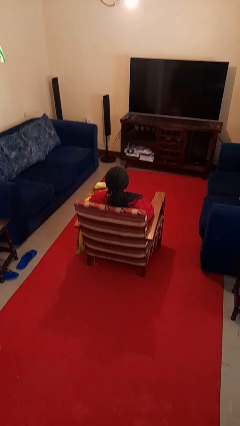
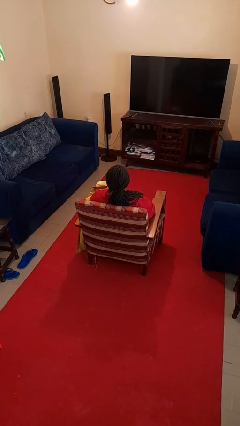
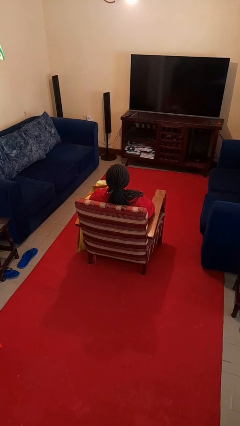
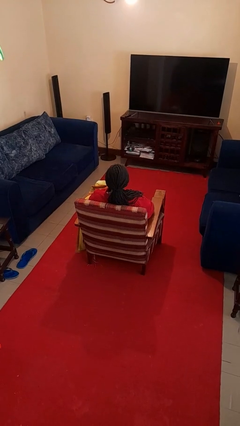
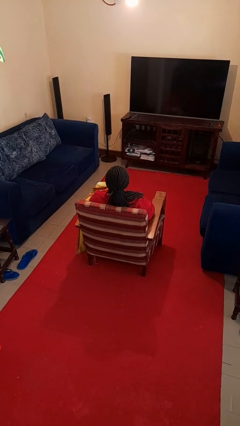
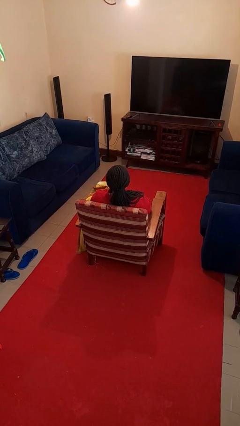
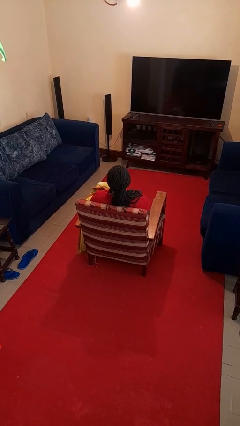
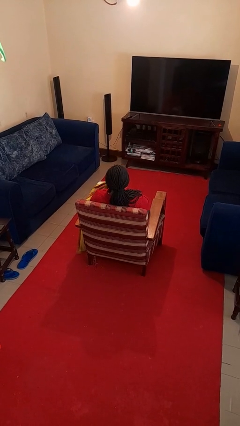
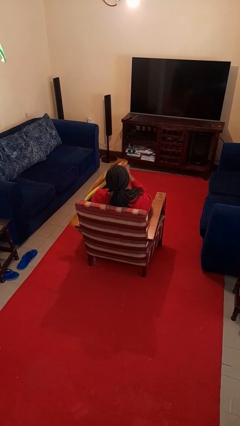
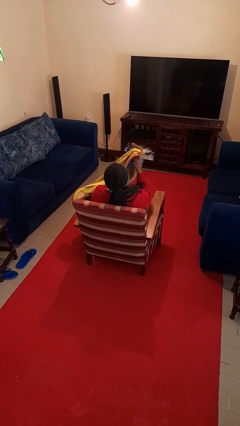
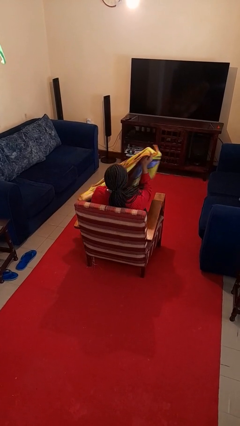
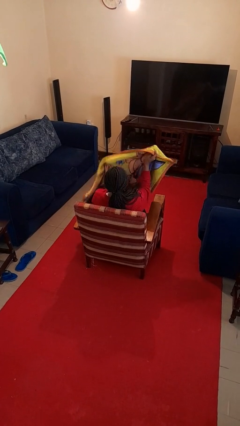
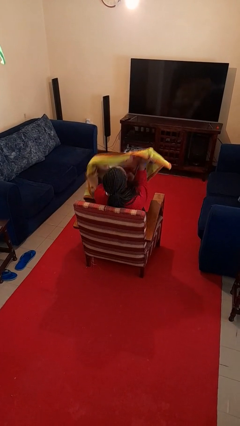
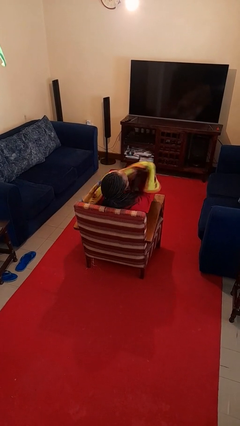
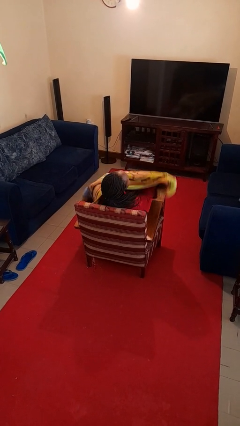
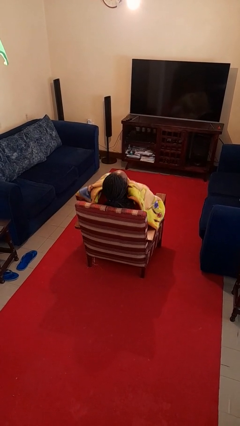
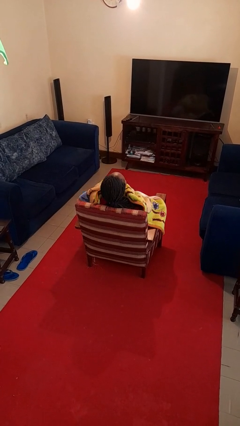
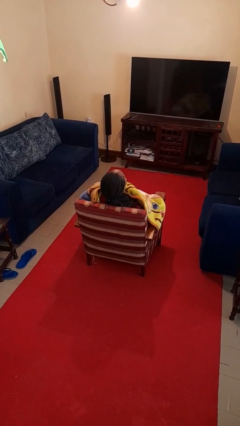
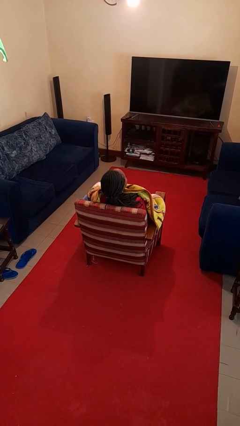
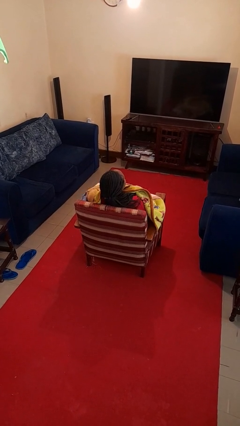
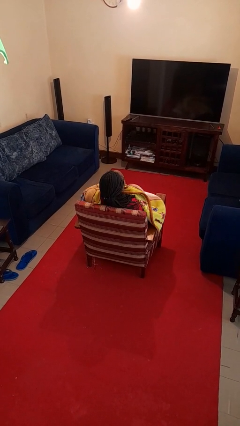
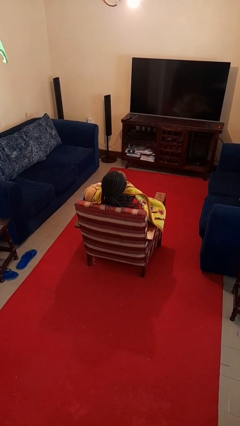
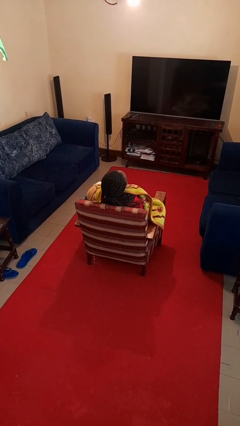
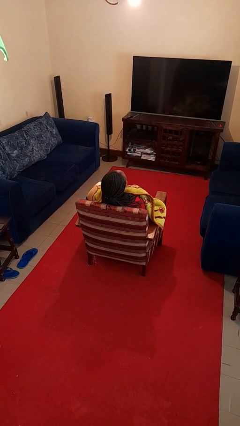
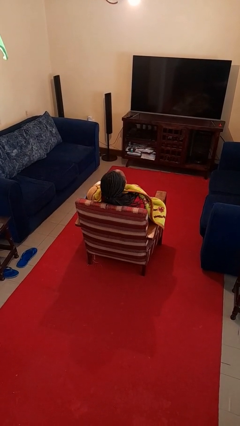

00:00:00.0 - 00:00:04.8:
person covers with blanket

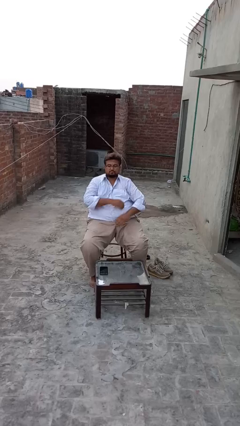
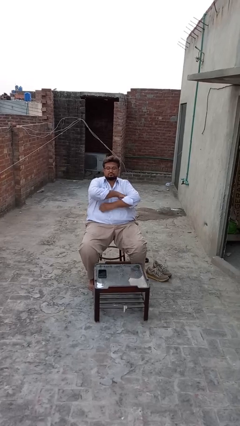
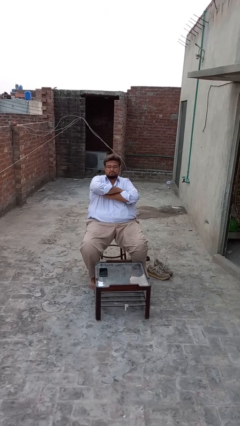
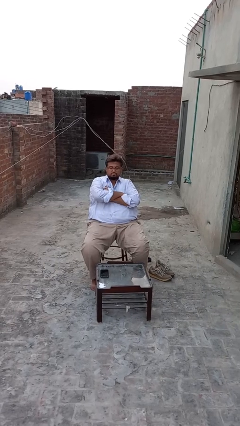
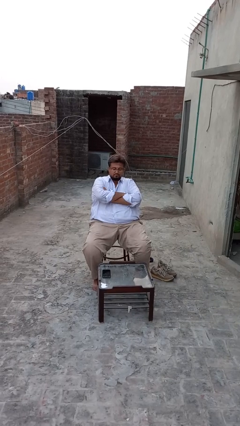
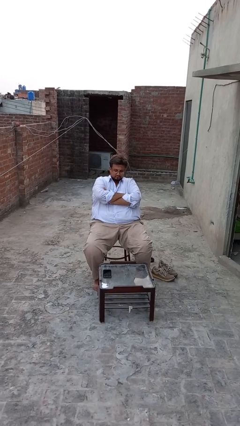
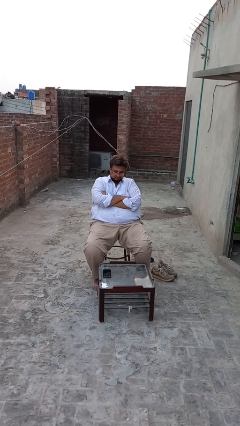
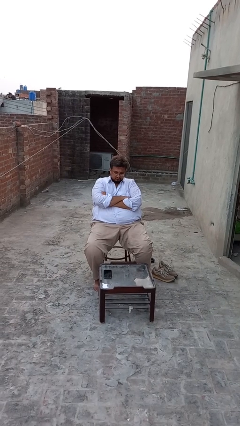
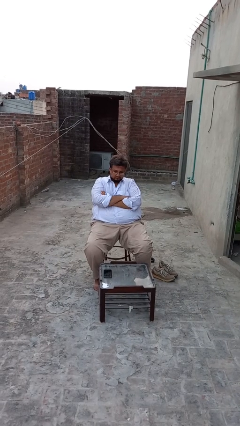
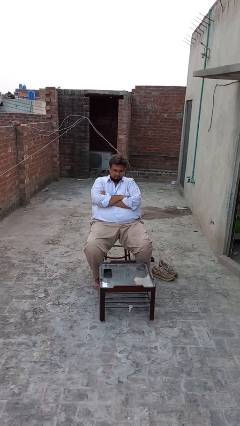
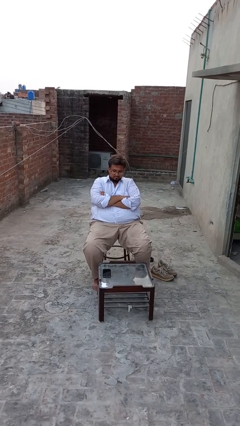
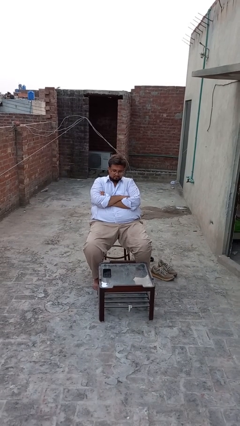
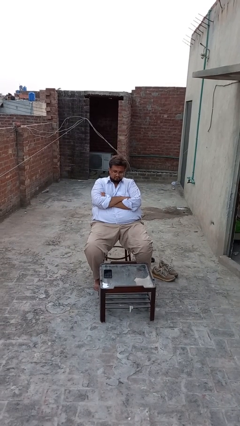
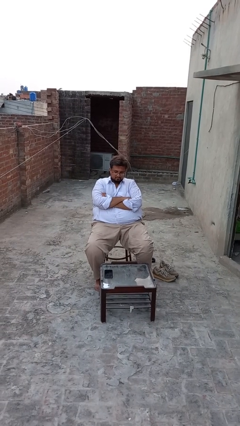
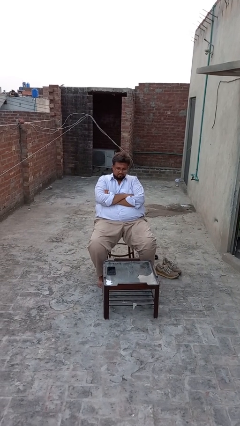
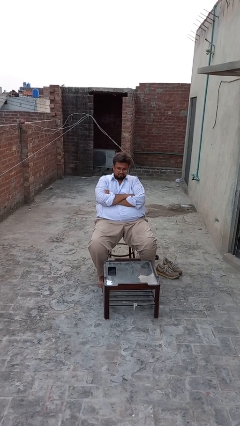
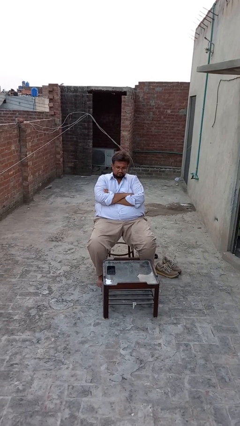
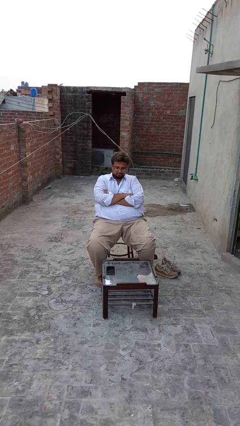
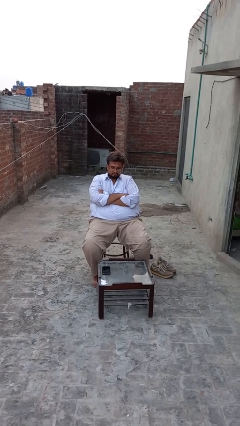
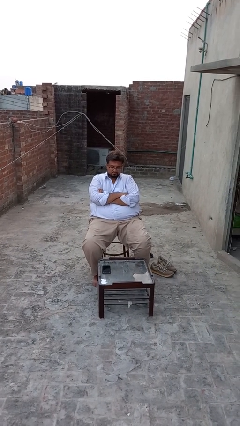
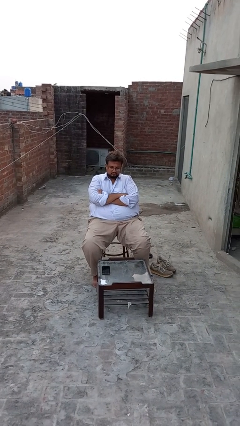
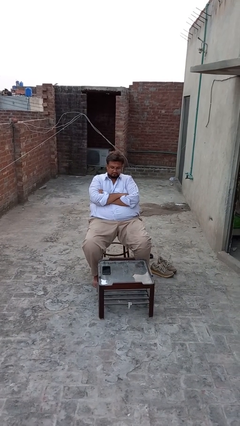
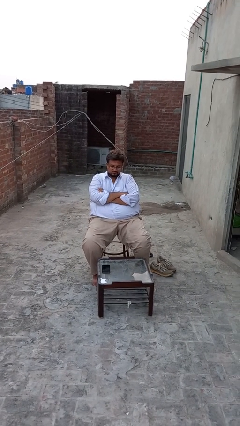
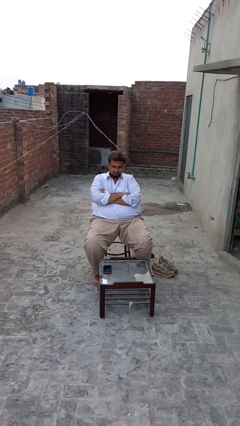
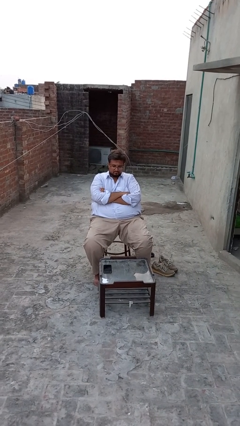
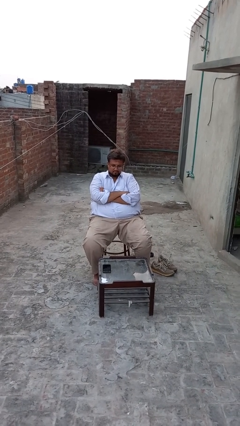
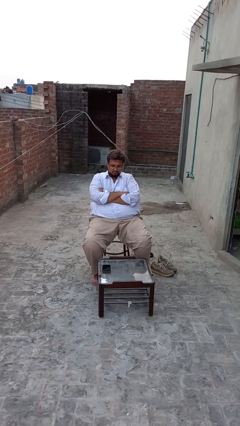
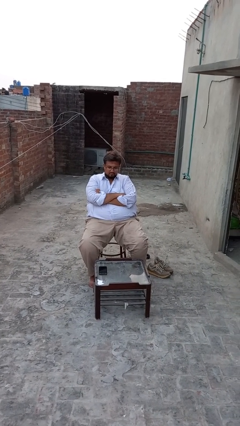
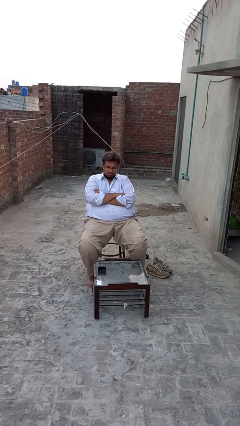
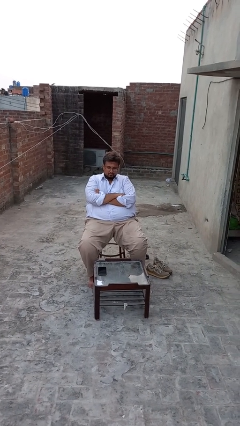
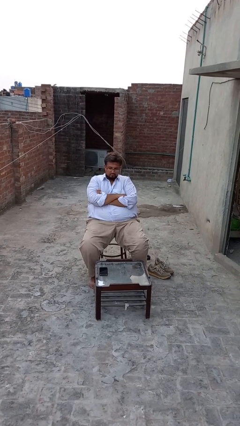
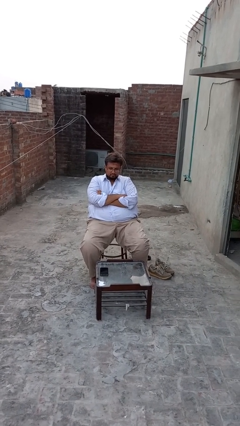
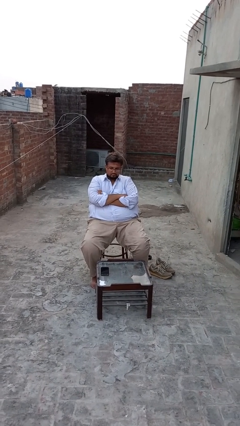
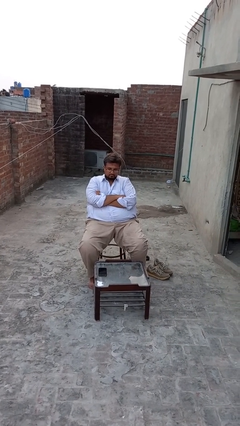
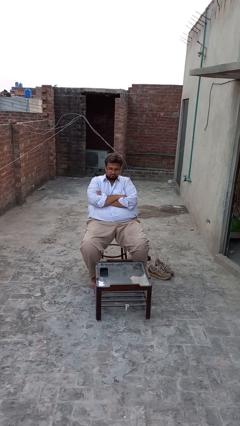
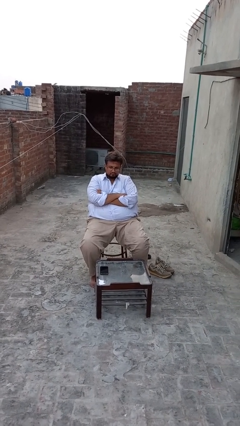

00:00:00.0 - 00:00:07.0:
person crosses arms

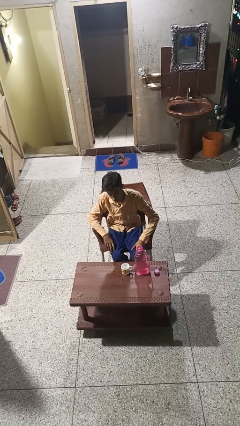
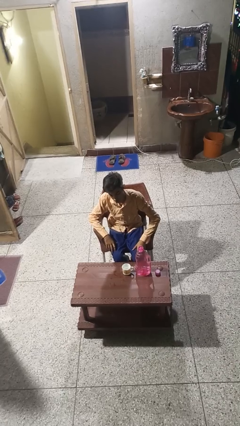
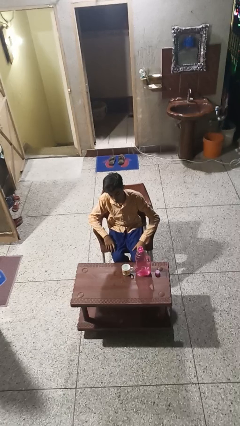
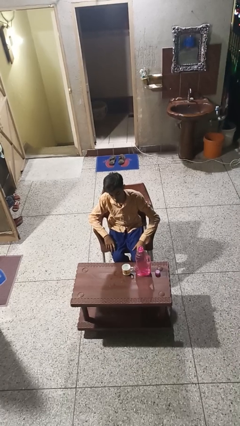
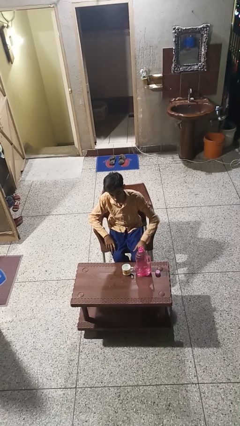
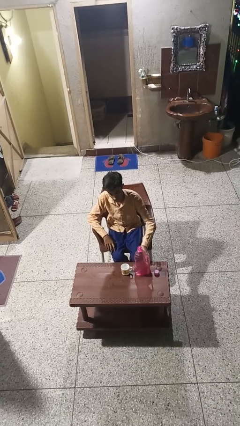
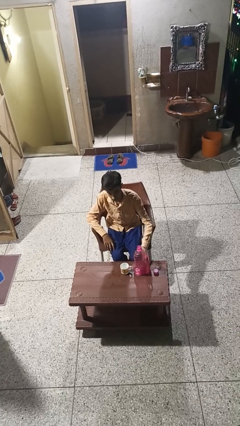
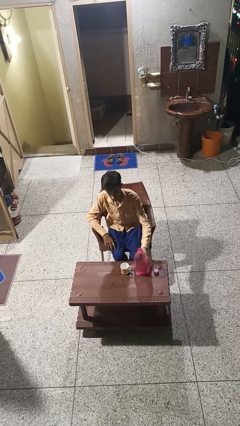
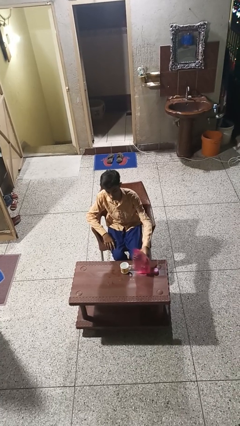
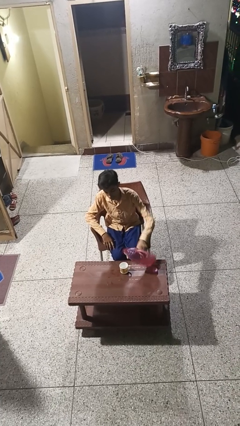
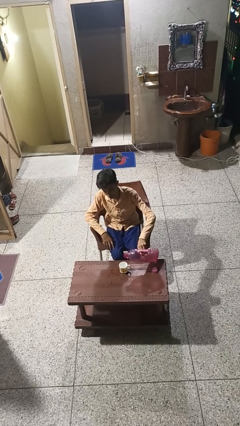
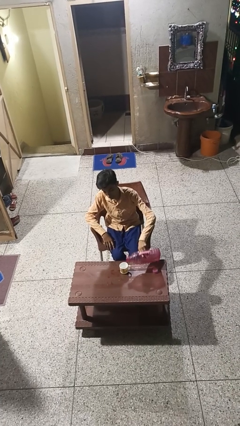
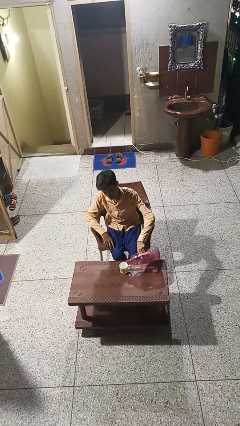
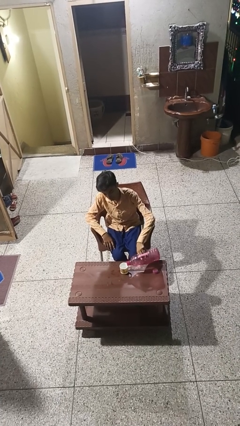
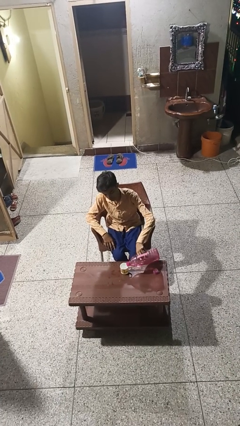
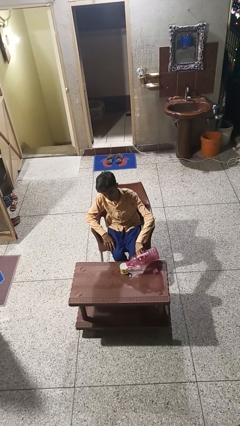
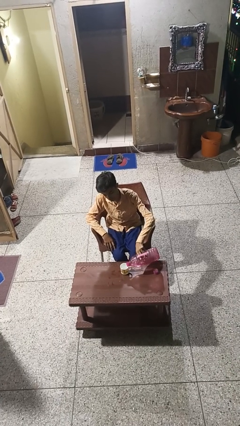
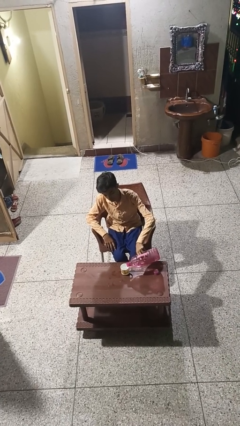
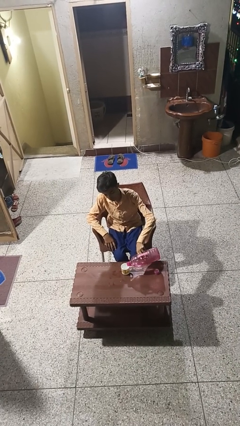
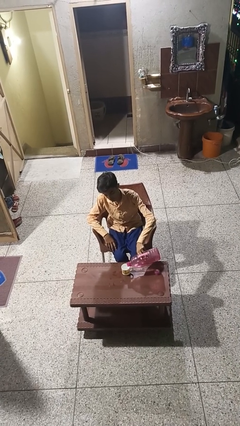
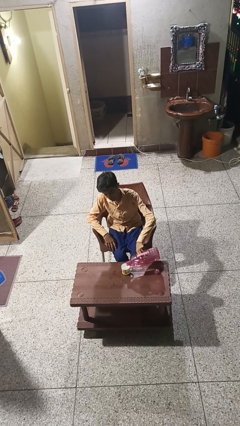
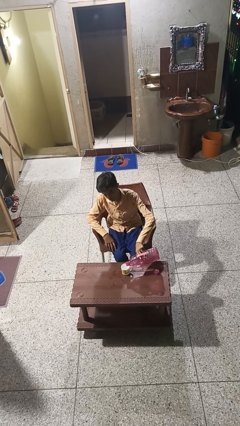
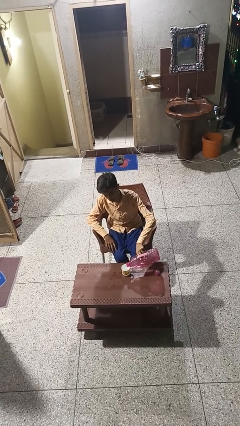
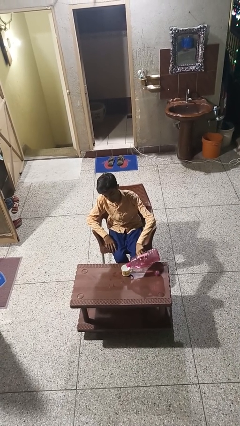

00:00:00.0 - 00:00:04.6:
person pours liquid into cup

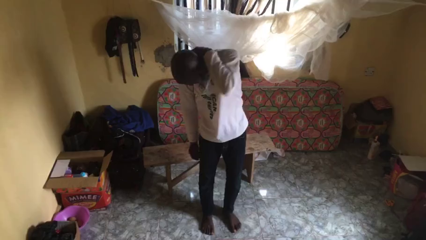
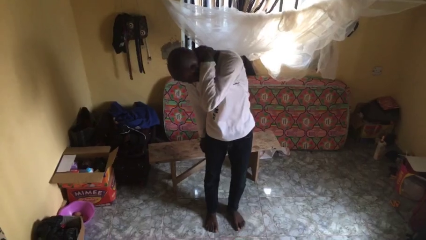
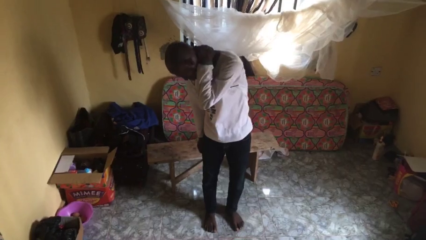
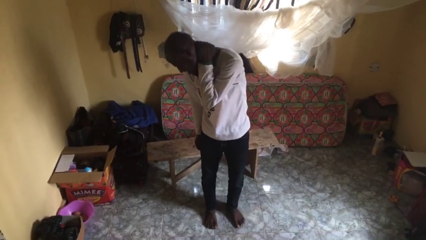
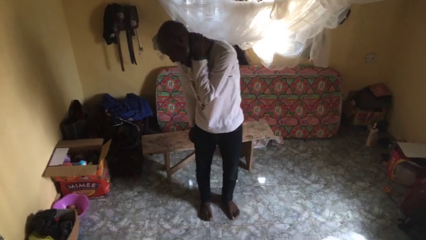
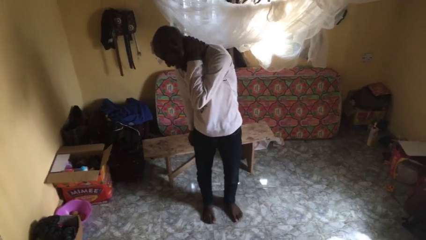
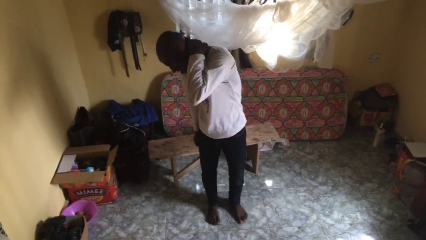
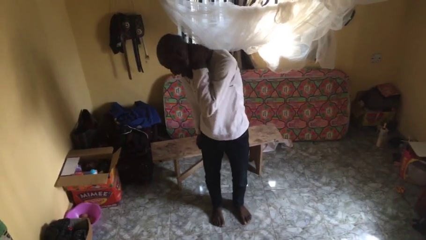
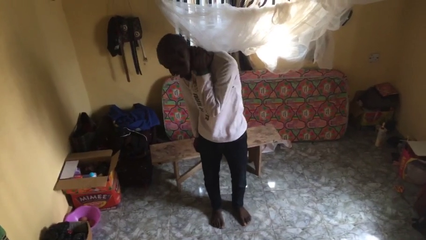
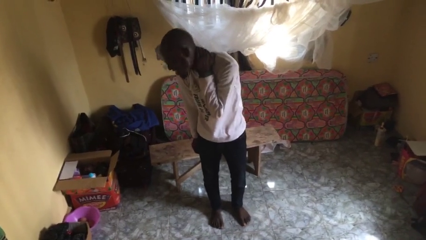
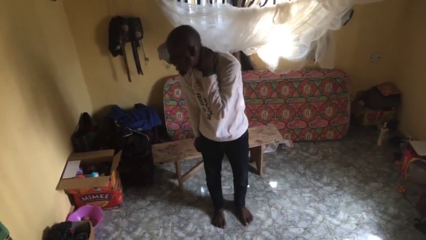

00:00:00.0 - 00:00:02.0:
person rubs neck
